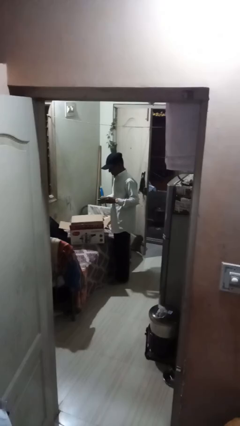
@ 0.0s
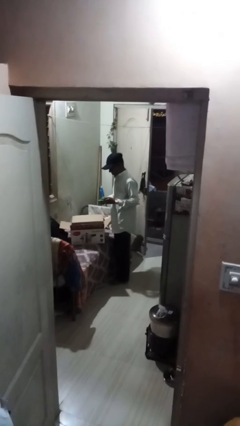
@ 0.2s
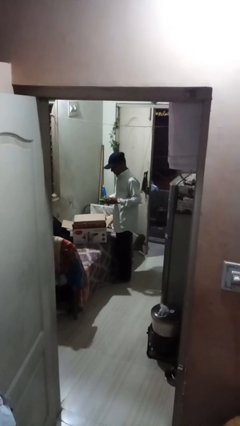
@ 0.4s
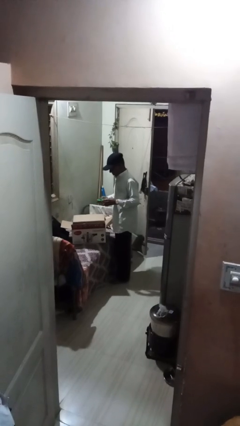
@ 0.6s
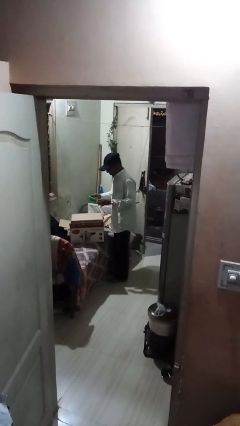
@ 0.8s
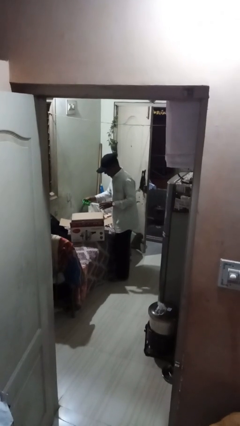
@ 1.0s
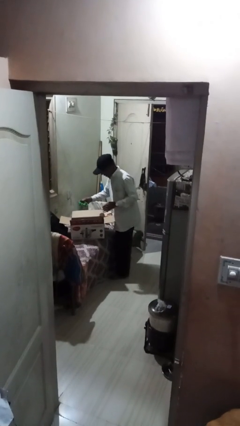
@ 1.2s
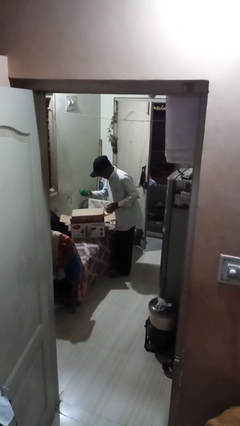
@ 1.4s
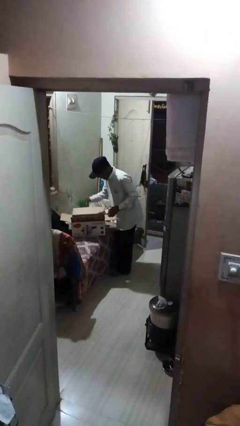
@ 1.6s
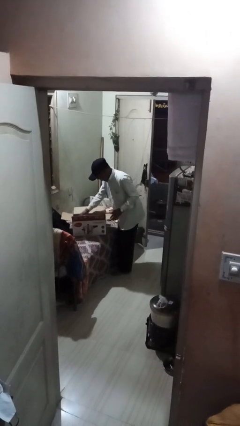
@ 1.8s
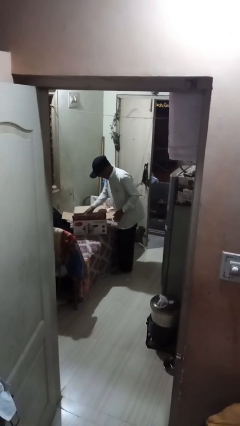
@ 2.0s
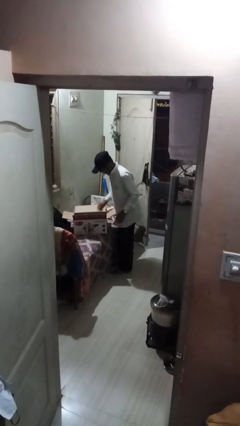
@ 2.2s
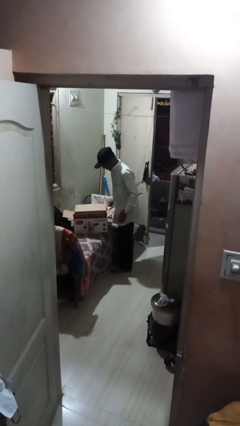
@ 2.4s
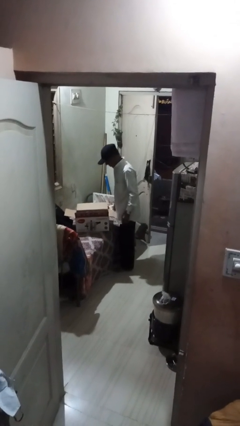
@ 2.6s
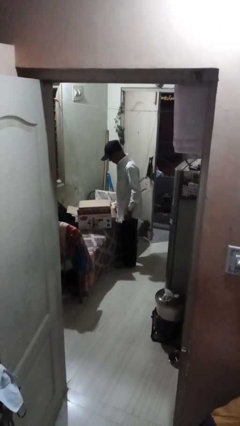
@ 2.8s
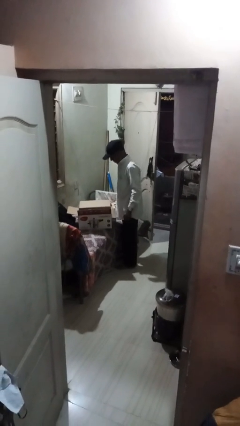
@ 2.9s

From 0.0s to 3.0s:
person puts object into box

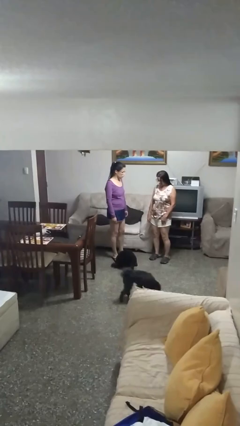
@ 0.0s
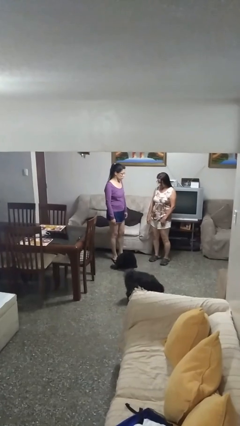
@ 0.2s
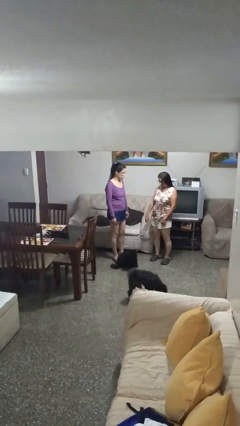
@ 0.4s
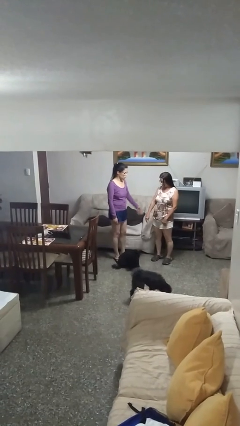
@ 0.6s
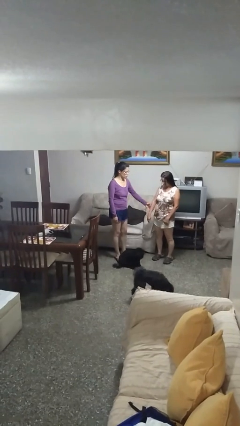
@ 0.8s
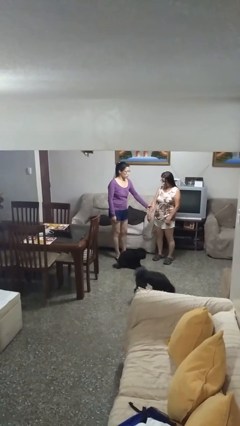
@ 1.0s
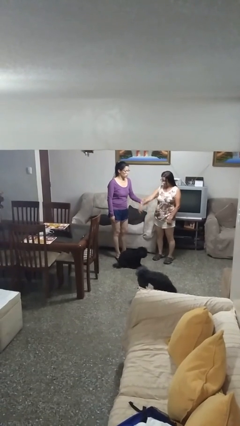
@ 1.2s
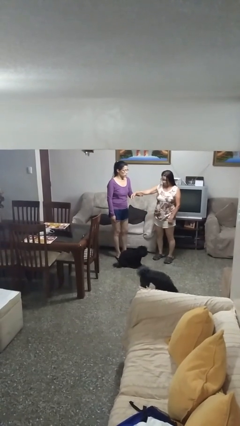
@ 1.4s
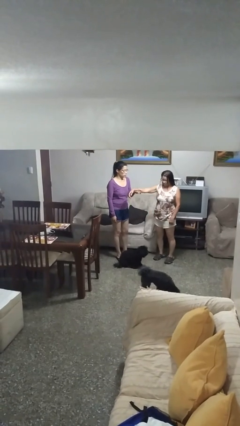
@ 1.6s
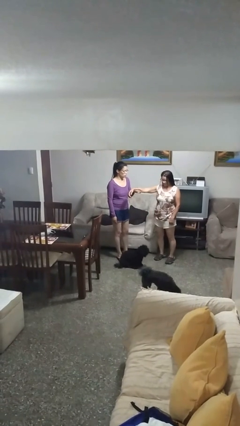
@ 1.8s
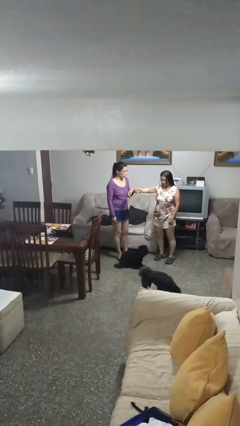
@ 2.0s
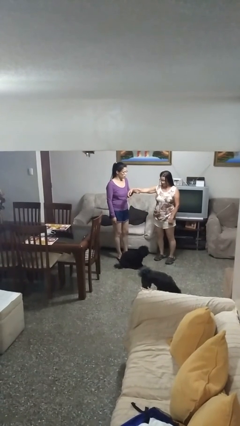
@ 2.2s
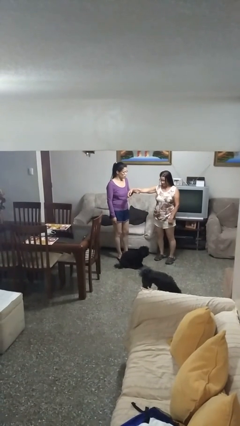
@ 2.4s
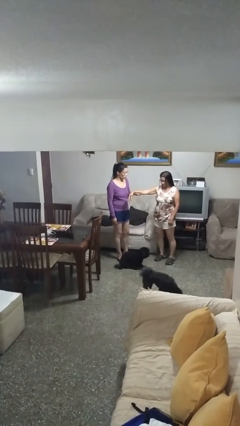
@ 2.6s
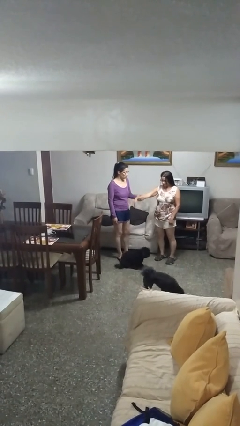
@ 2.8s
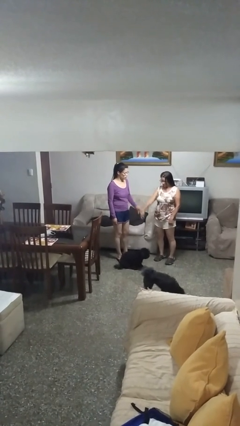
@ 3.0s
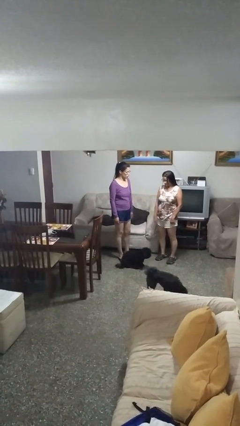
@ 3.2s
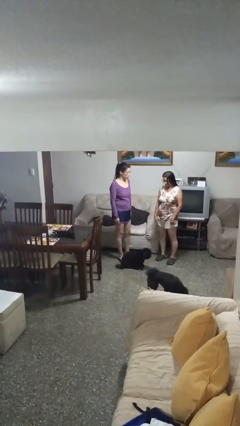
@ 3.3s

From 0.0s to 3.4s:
person grabs person by forearm

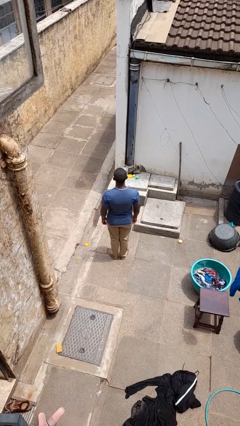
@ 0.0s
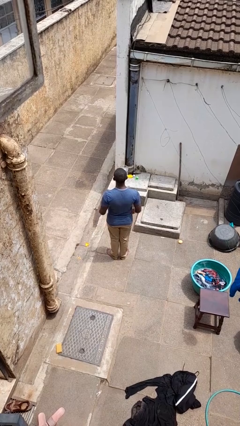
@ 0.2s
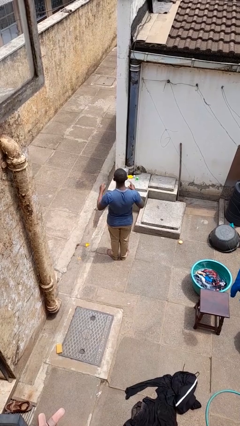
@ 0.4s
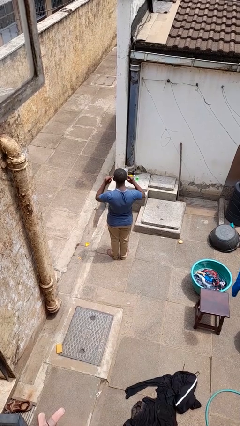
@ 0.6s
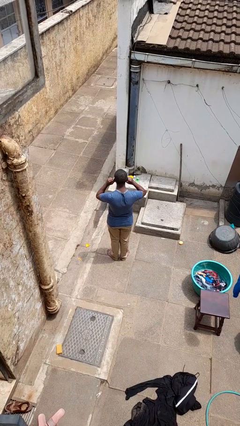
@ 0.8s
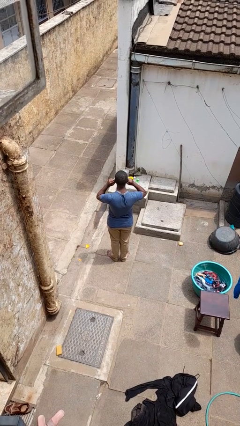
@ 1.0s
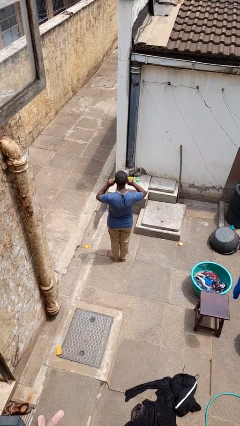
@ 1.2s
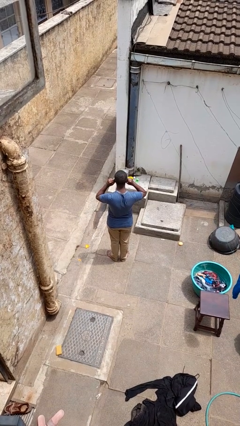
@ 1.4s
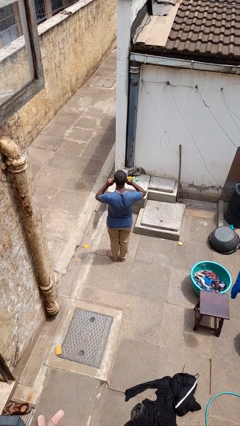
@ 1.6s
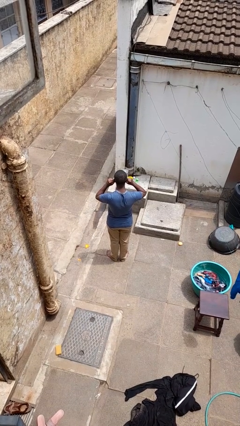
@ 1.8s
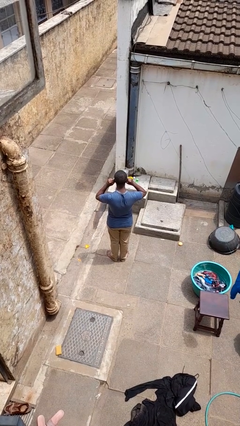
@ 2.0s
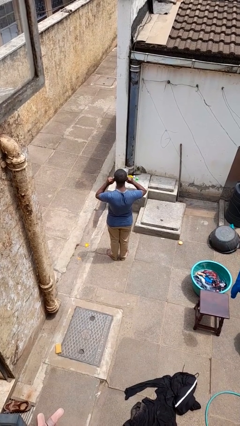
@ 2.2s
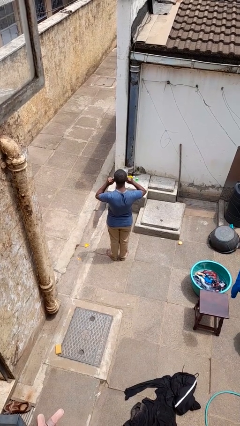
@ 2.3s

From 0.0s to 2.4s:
person puts fingers in ear

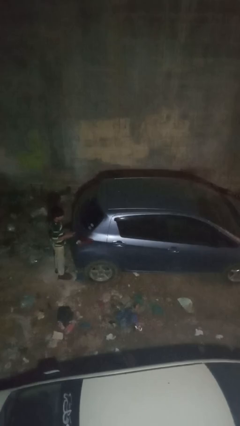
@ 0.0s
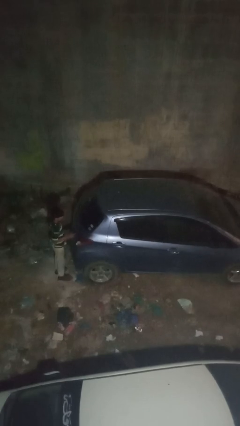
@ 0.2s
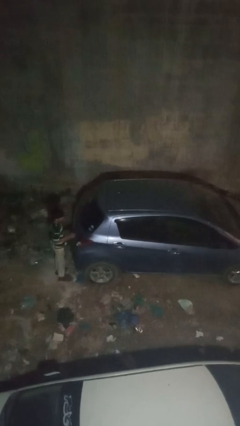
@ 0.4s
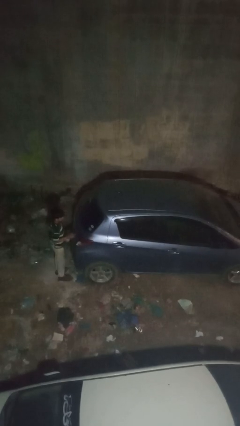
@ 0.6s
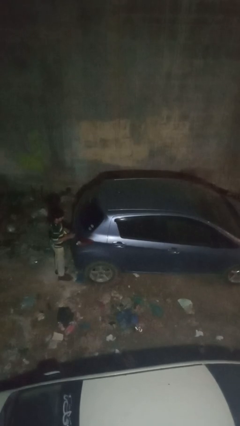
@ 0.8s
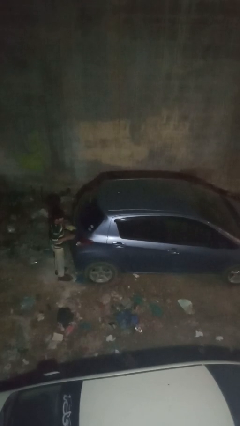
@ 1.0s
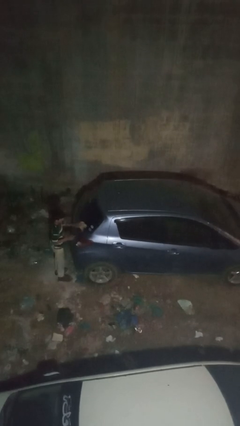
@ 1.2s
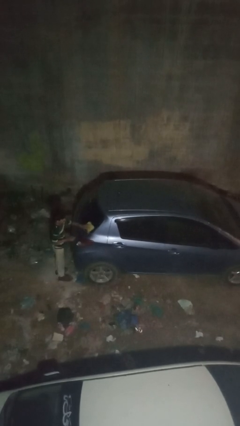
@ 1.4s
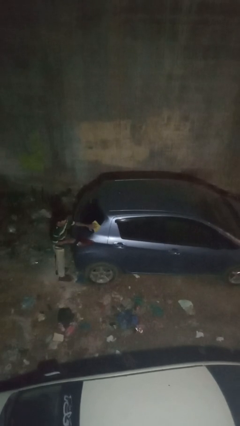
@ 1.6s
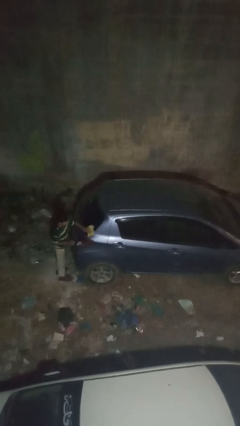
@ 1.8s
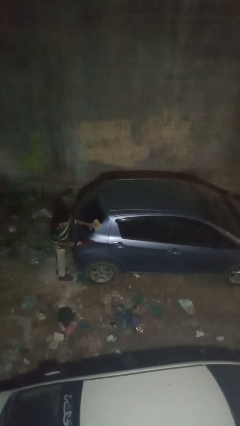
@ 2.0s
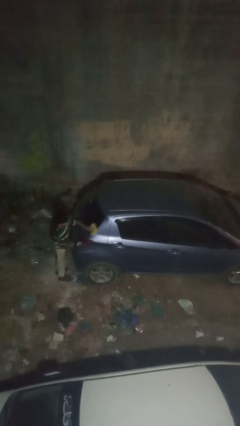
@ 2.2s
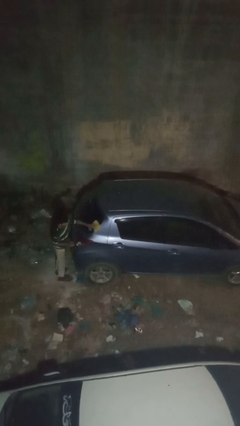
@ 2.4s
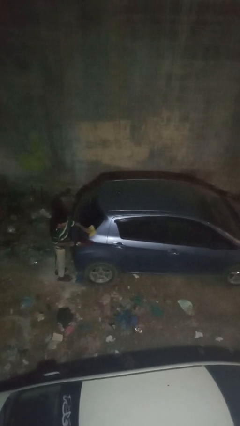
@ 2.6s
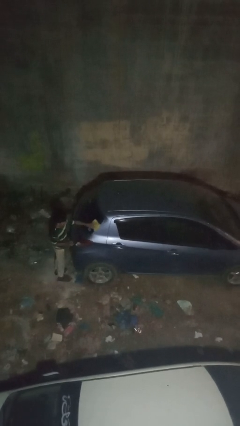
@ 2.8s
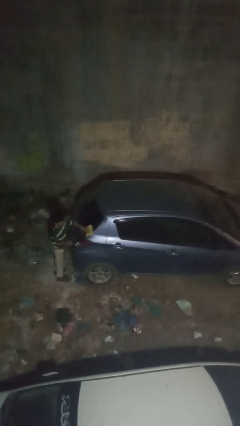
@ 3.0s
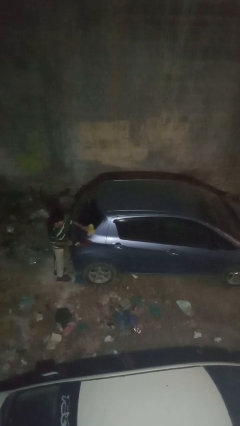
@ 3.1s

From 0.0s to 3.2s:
person polishes car with rag

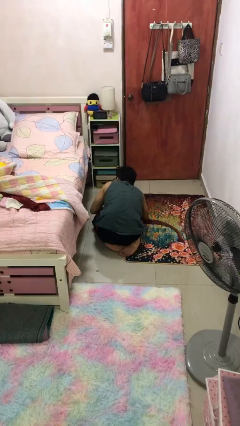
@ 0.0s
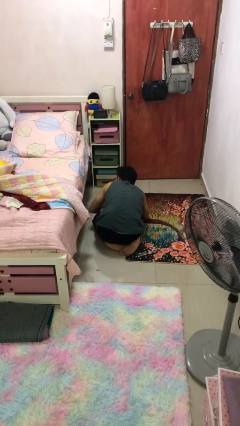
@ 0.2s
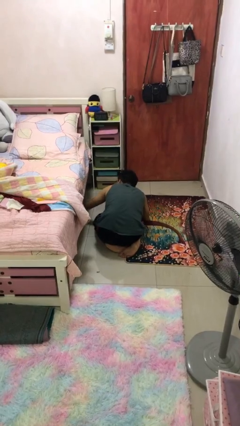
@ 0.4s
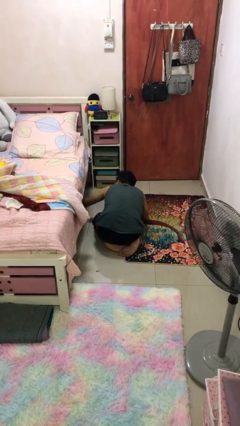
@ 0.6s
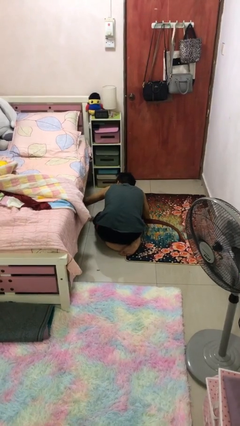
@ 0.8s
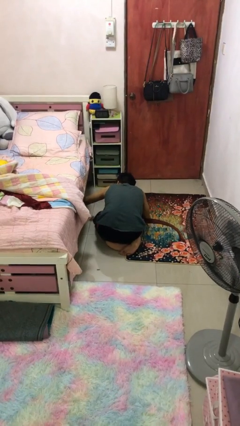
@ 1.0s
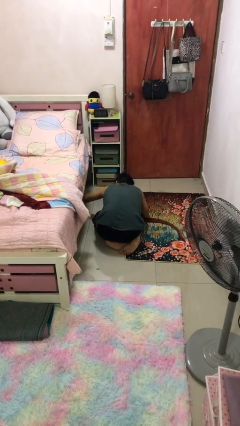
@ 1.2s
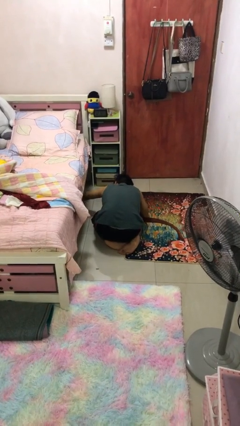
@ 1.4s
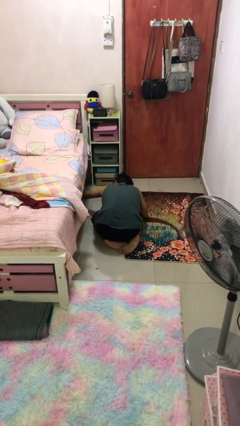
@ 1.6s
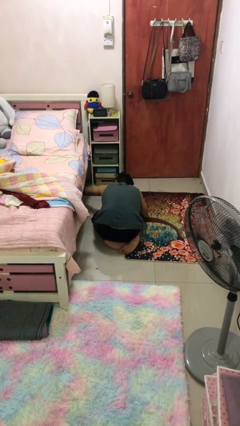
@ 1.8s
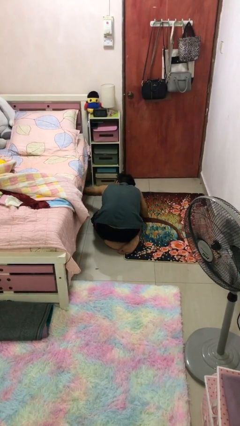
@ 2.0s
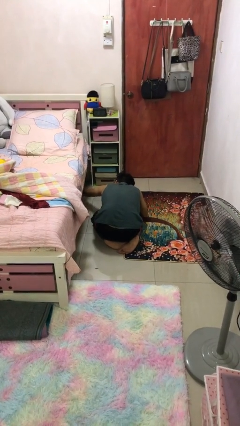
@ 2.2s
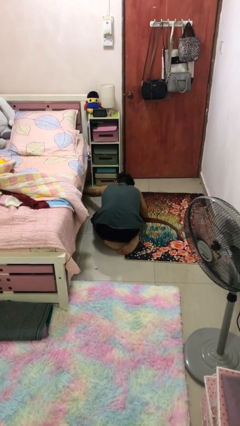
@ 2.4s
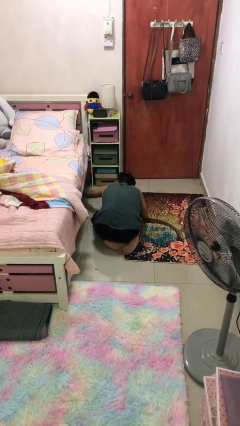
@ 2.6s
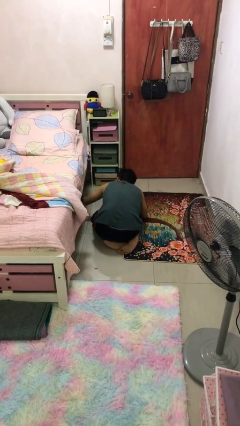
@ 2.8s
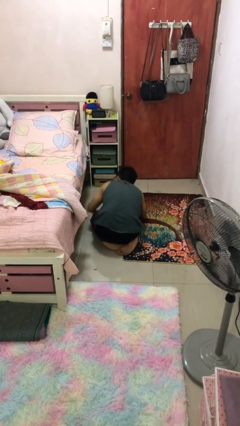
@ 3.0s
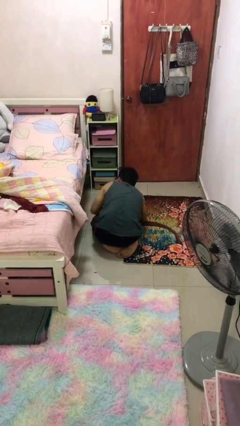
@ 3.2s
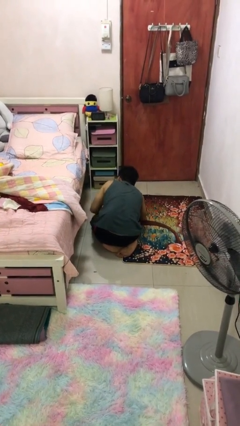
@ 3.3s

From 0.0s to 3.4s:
person searches under bed

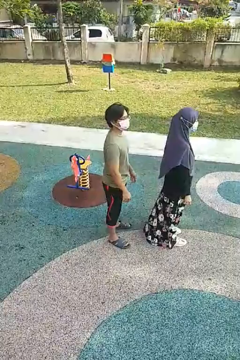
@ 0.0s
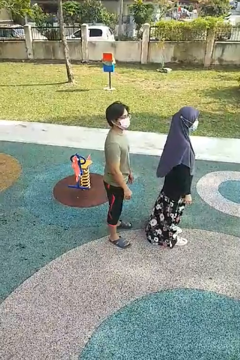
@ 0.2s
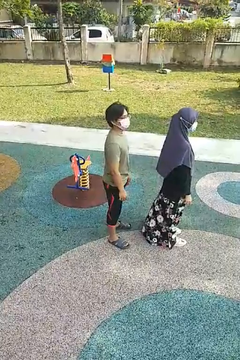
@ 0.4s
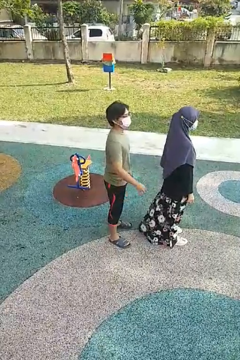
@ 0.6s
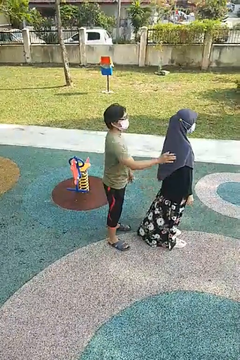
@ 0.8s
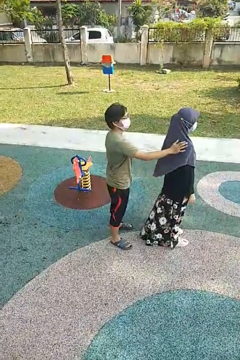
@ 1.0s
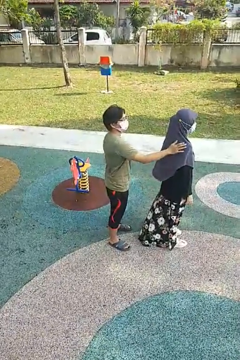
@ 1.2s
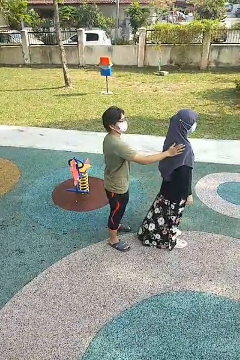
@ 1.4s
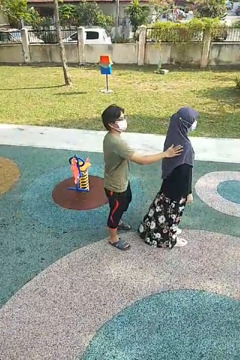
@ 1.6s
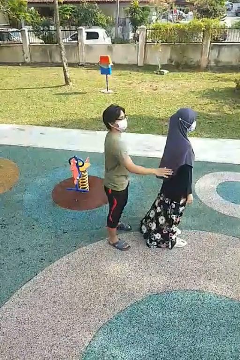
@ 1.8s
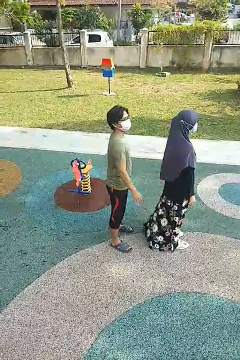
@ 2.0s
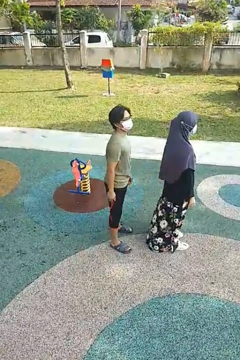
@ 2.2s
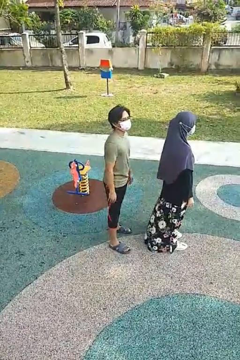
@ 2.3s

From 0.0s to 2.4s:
person touches back of person
